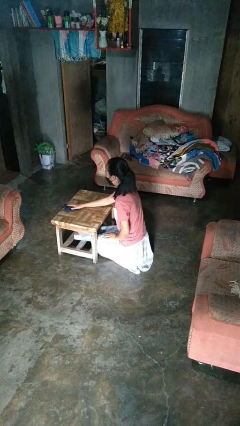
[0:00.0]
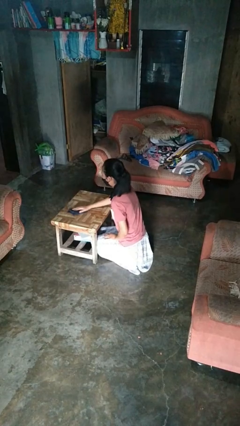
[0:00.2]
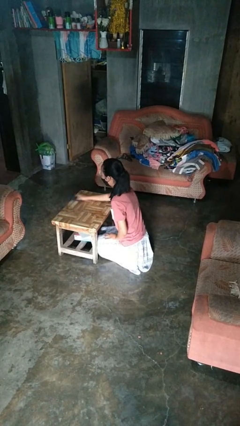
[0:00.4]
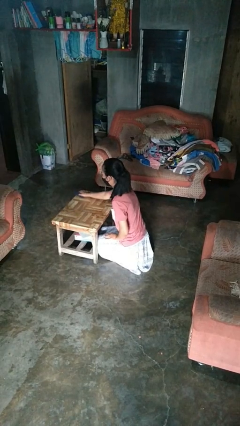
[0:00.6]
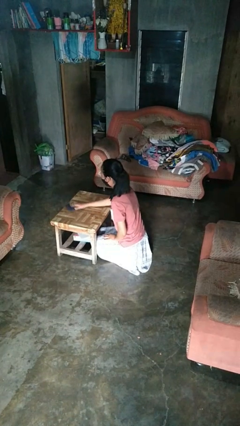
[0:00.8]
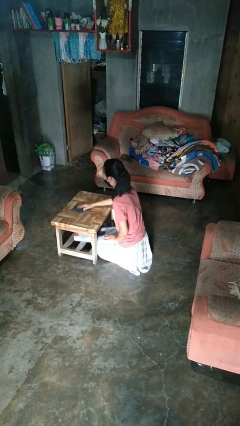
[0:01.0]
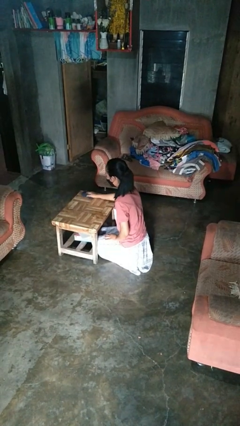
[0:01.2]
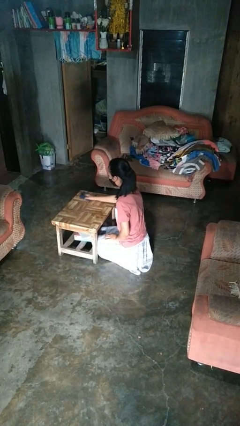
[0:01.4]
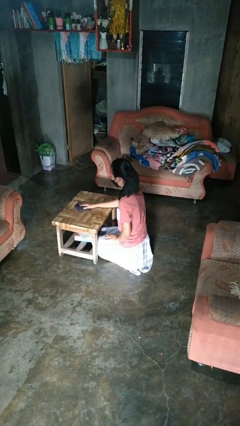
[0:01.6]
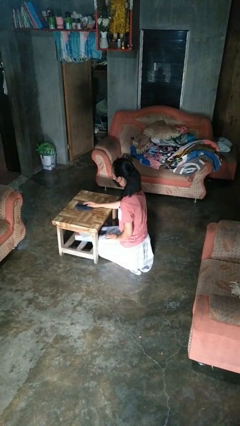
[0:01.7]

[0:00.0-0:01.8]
person cleans table with rag

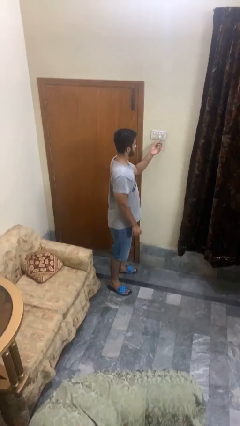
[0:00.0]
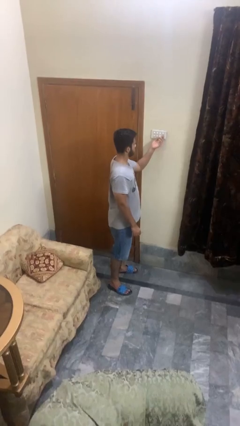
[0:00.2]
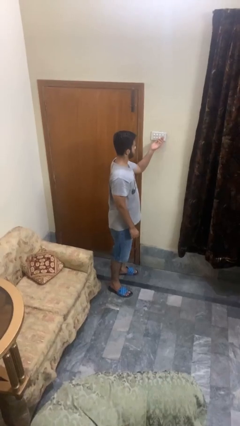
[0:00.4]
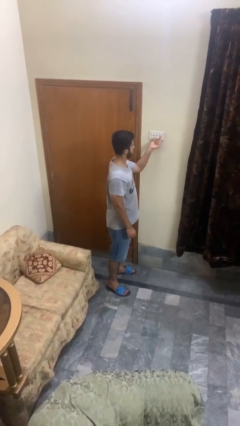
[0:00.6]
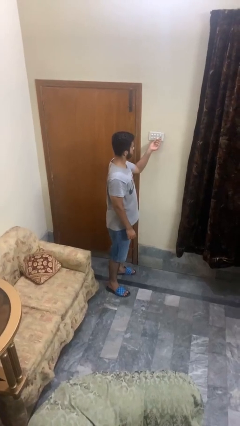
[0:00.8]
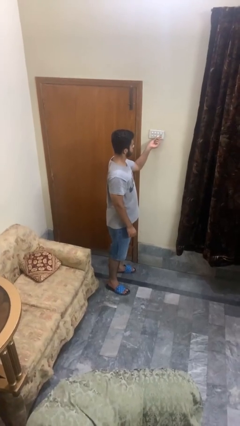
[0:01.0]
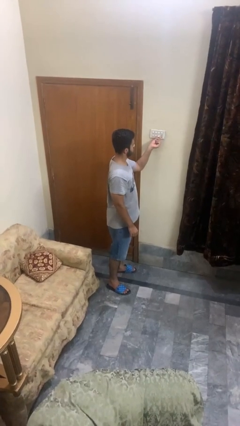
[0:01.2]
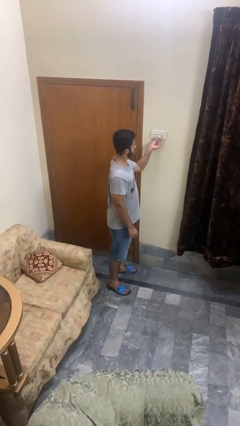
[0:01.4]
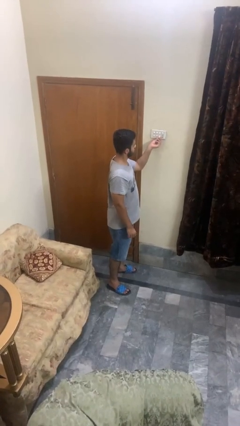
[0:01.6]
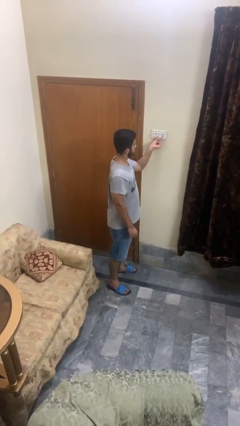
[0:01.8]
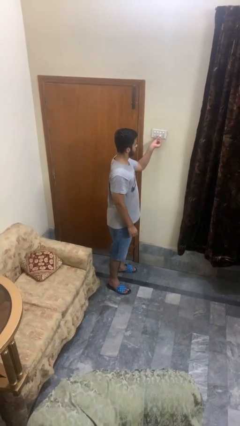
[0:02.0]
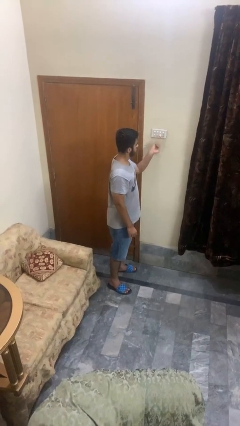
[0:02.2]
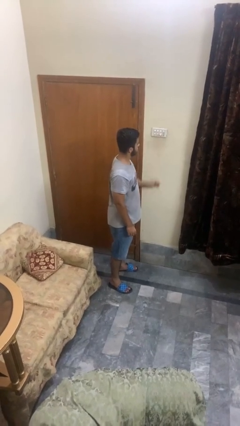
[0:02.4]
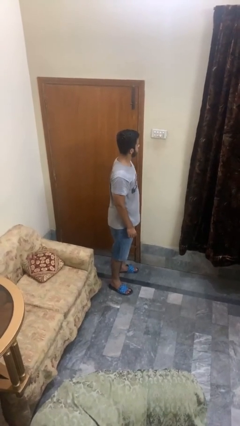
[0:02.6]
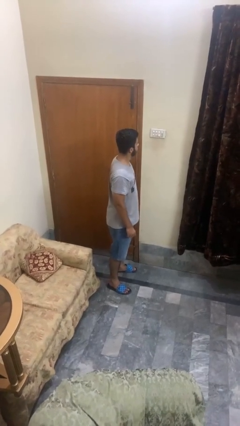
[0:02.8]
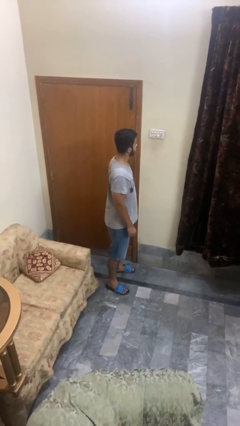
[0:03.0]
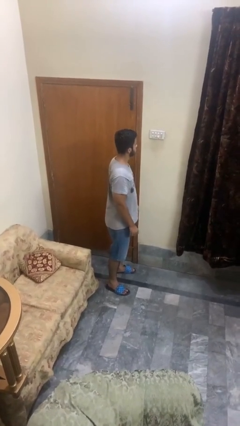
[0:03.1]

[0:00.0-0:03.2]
person adjusts thermostat

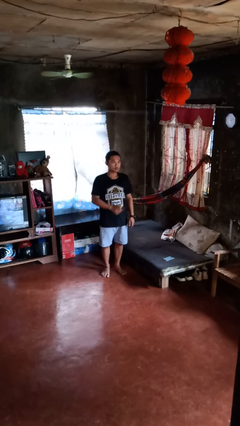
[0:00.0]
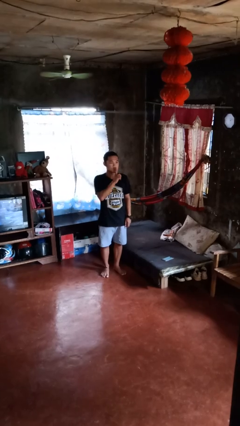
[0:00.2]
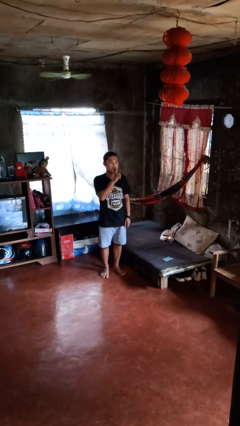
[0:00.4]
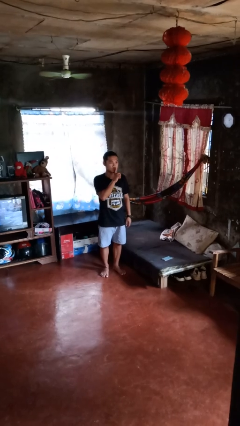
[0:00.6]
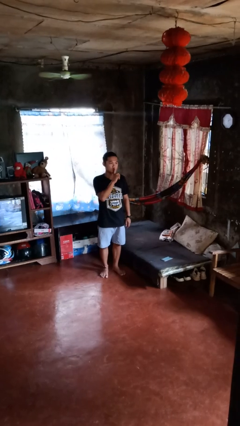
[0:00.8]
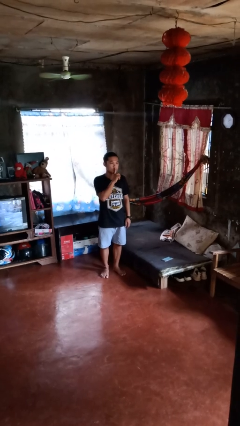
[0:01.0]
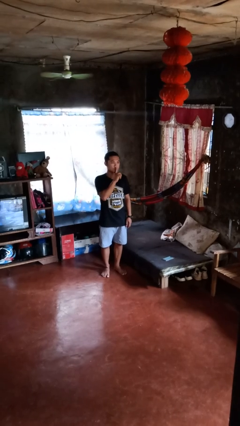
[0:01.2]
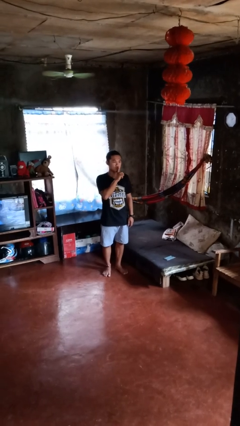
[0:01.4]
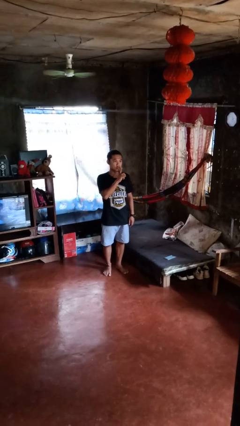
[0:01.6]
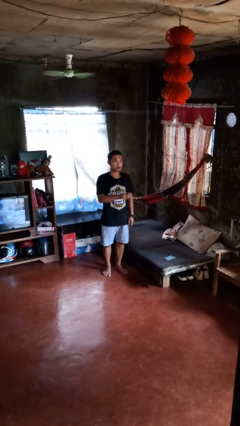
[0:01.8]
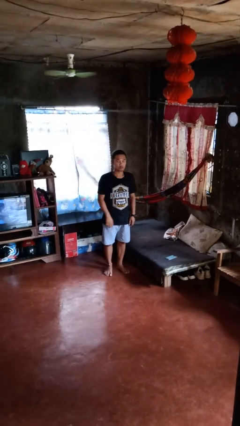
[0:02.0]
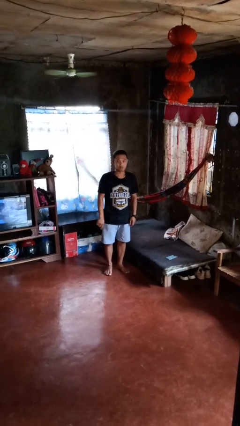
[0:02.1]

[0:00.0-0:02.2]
person gestures be quiet

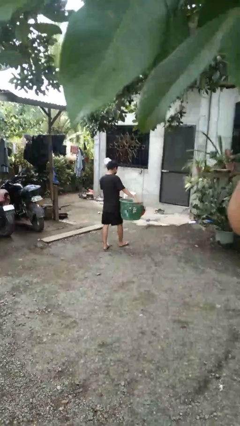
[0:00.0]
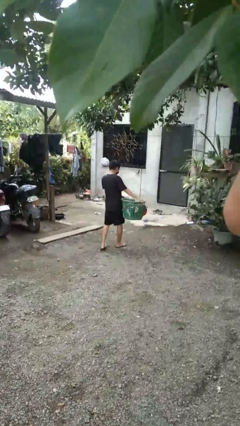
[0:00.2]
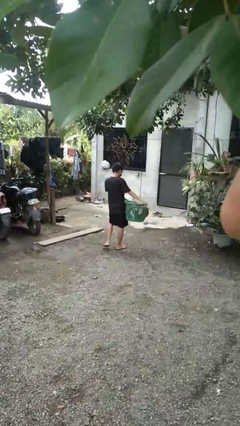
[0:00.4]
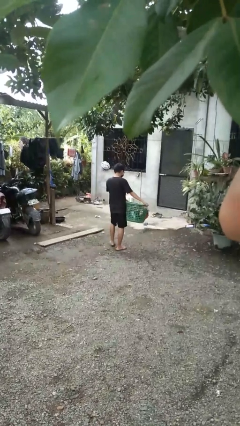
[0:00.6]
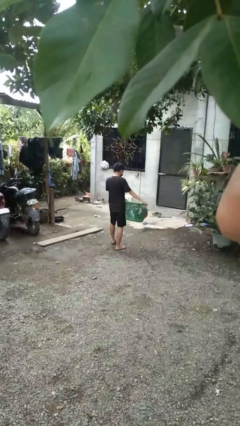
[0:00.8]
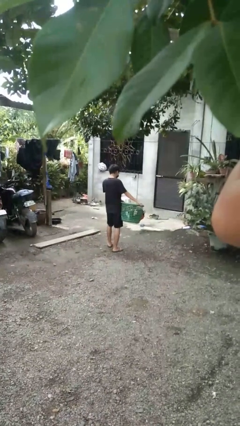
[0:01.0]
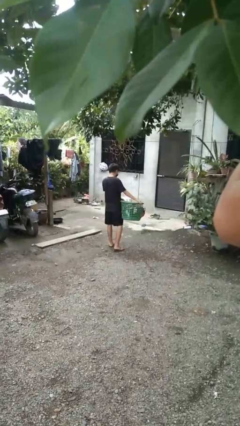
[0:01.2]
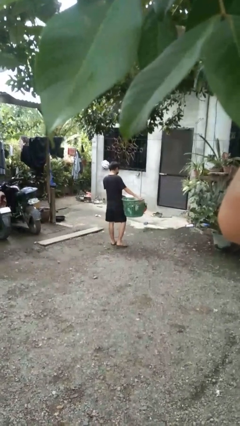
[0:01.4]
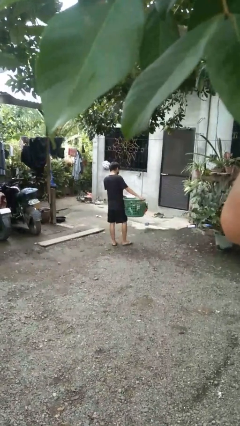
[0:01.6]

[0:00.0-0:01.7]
person carries laundry basket

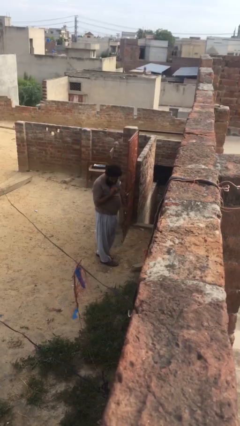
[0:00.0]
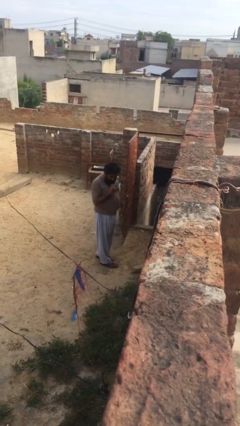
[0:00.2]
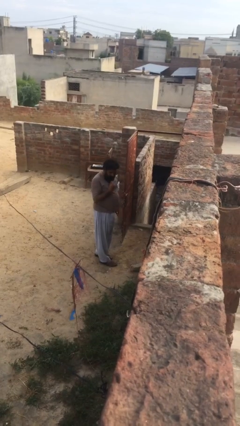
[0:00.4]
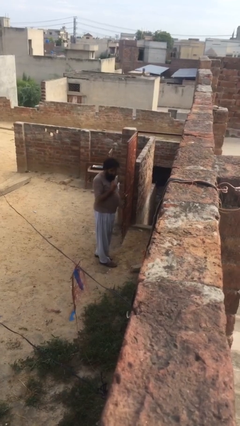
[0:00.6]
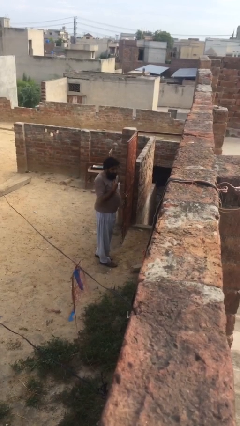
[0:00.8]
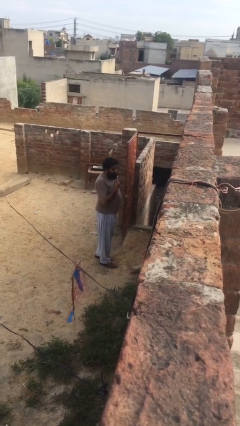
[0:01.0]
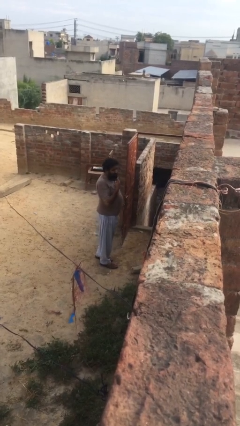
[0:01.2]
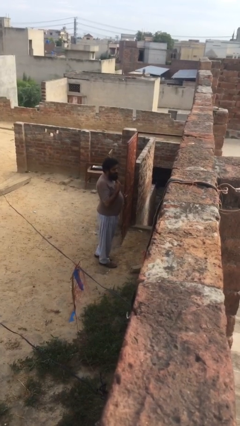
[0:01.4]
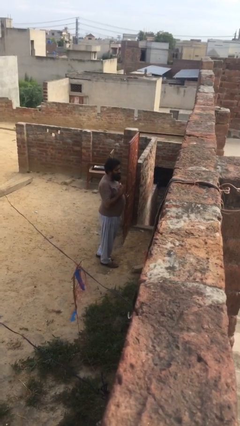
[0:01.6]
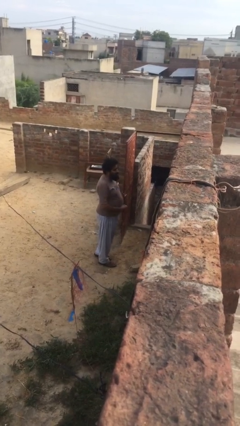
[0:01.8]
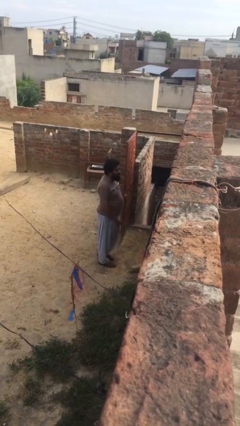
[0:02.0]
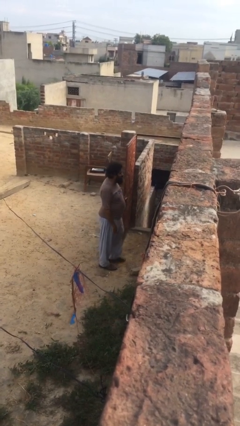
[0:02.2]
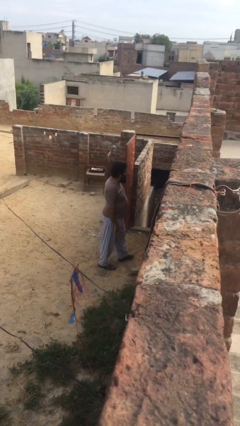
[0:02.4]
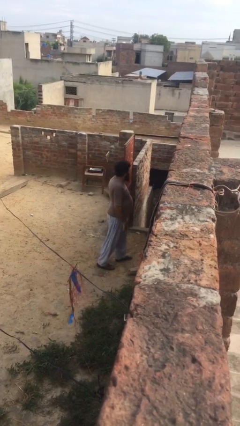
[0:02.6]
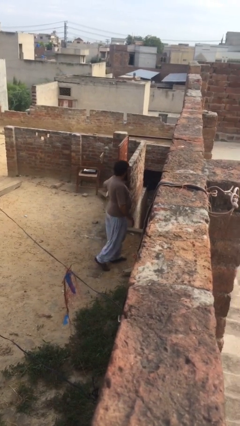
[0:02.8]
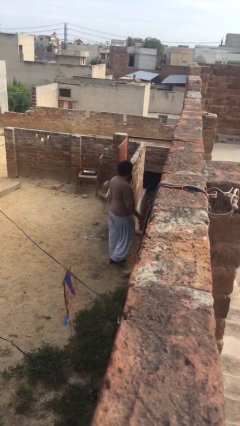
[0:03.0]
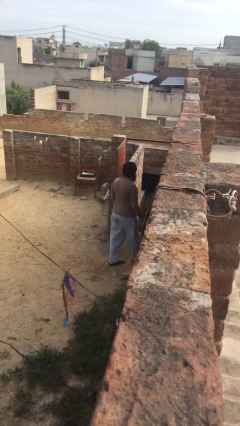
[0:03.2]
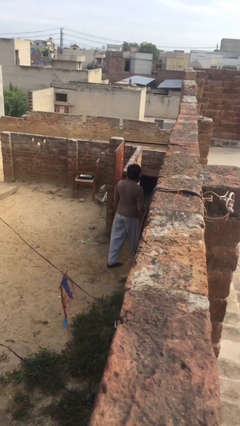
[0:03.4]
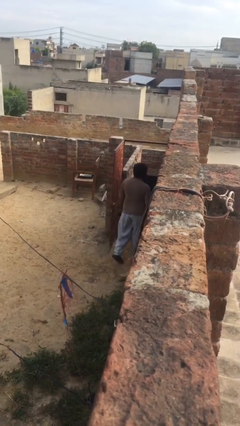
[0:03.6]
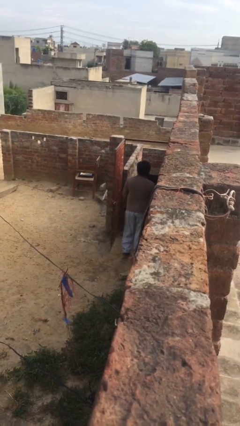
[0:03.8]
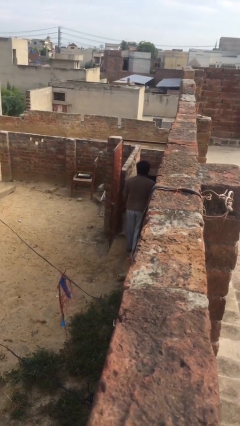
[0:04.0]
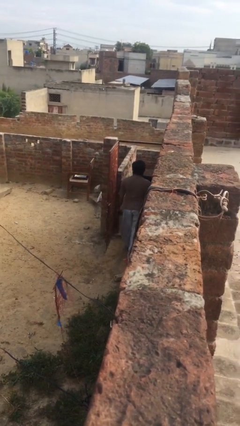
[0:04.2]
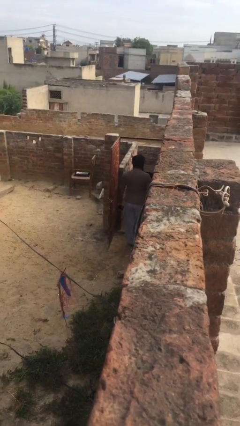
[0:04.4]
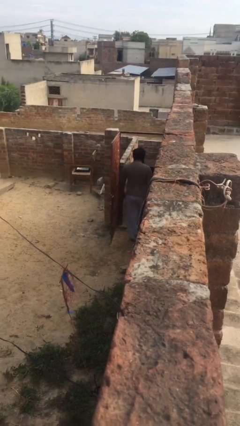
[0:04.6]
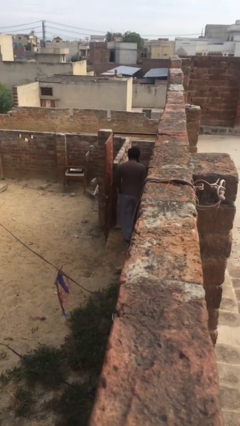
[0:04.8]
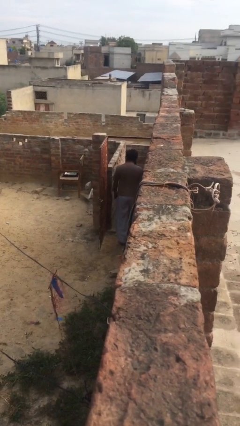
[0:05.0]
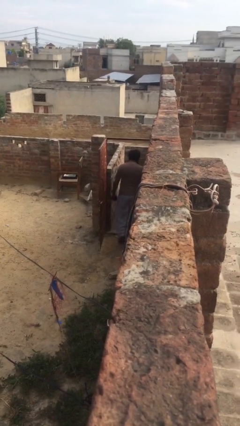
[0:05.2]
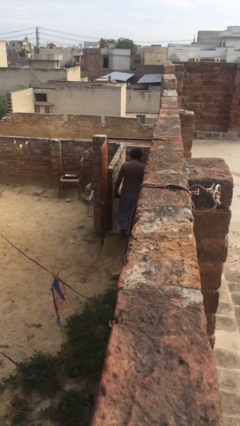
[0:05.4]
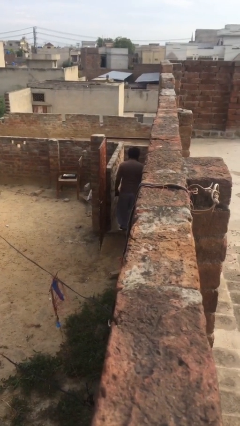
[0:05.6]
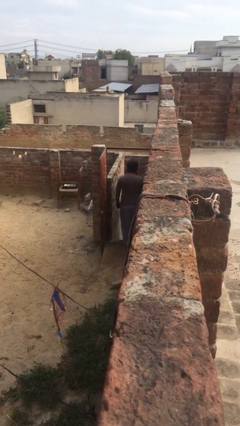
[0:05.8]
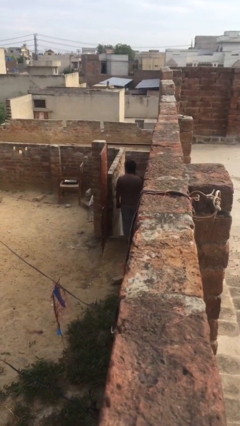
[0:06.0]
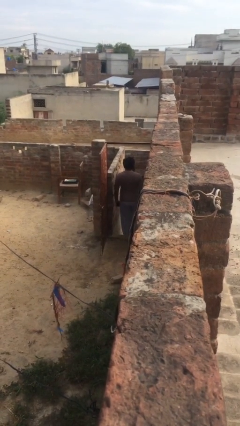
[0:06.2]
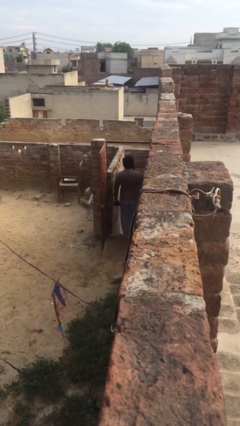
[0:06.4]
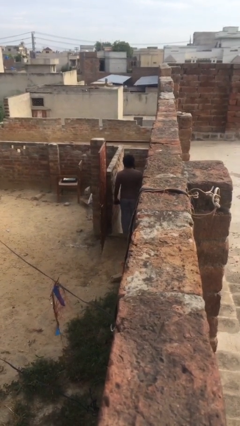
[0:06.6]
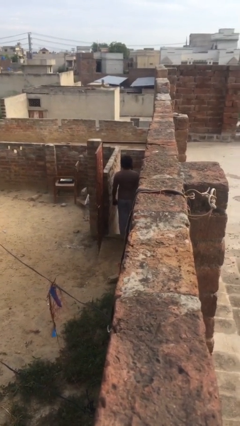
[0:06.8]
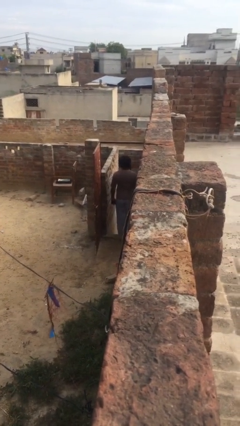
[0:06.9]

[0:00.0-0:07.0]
person exits scene through structure

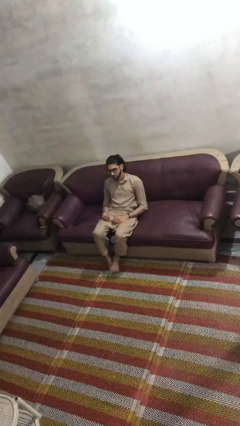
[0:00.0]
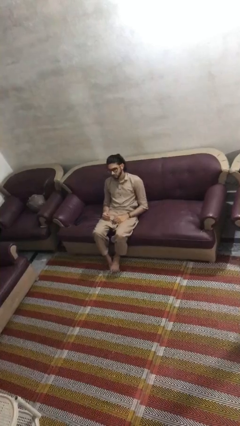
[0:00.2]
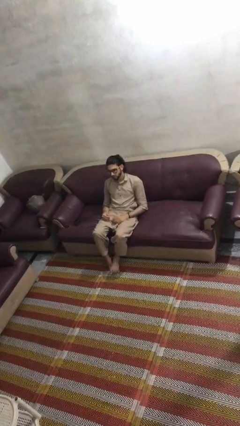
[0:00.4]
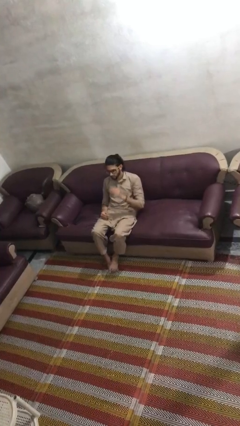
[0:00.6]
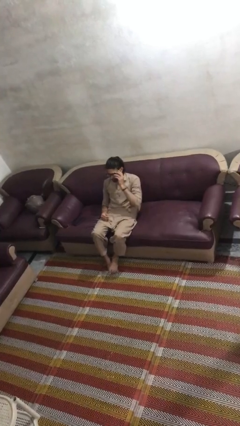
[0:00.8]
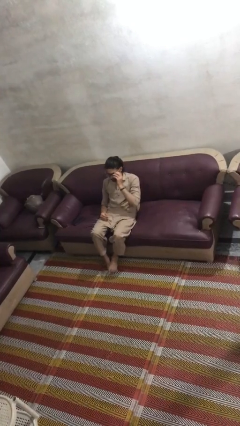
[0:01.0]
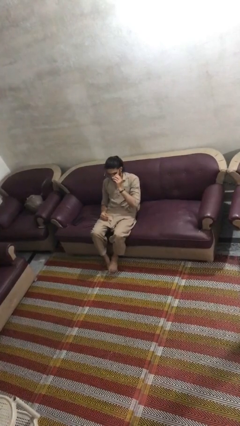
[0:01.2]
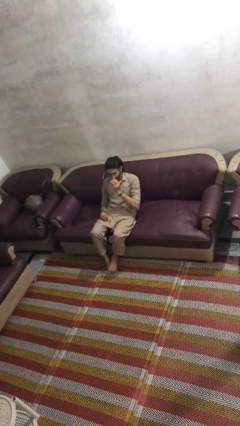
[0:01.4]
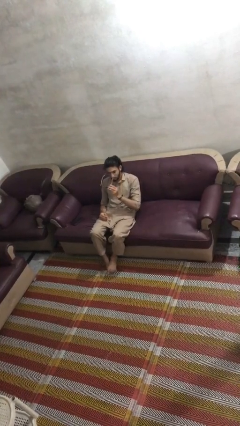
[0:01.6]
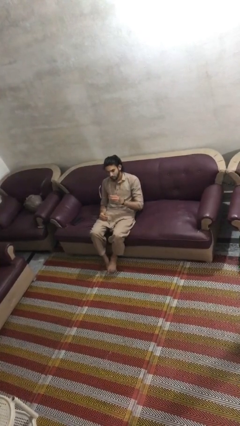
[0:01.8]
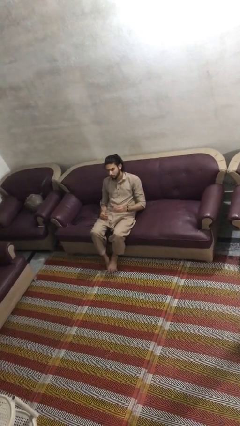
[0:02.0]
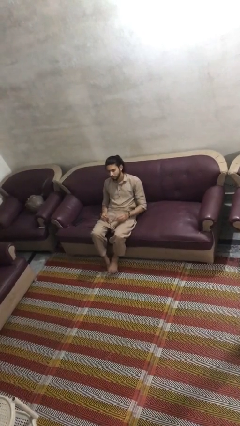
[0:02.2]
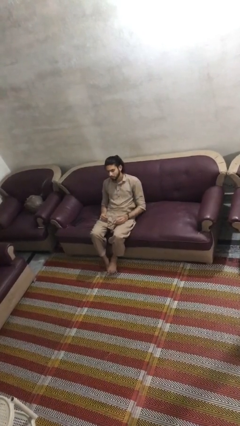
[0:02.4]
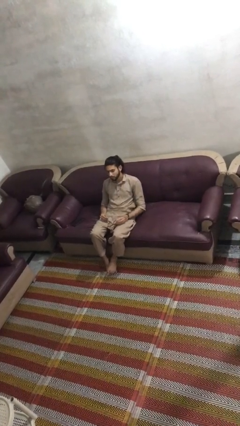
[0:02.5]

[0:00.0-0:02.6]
person takes off glasses
